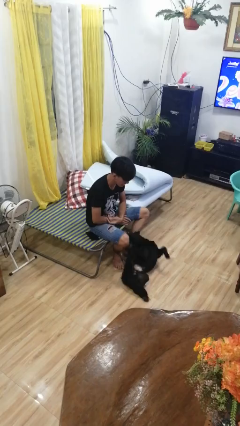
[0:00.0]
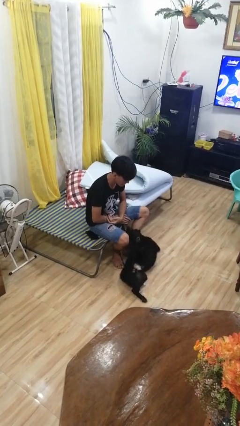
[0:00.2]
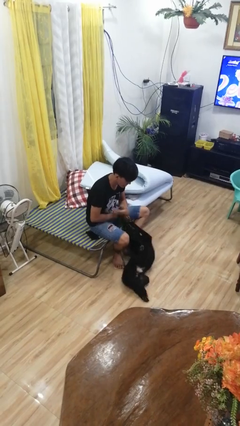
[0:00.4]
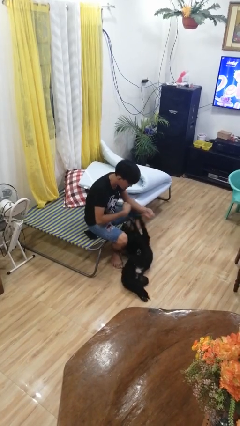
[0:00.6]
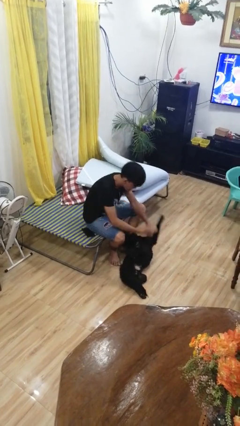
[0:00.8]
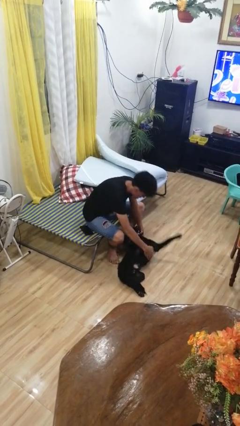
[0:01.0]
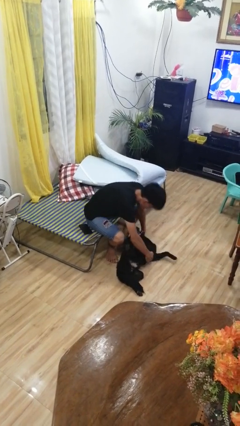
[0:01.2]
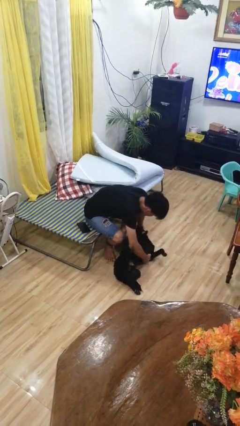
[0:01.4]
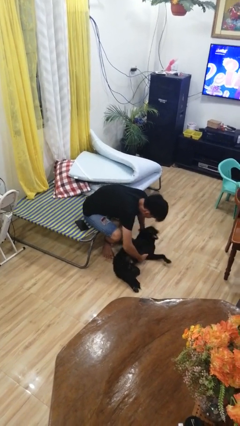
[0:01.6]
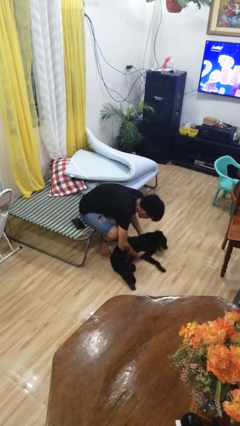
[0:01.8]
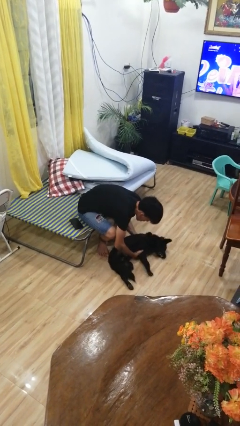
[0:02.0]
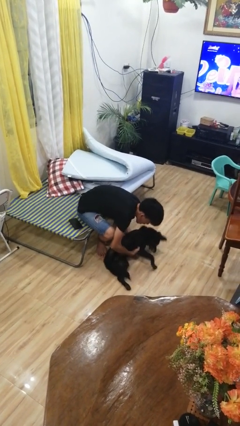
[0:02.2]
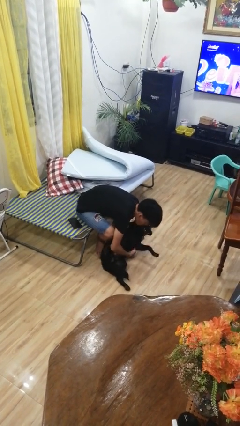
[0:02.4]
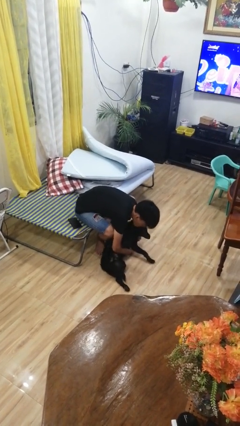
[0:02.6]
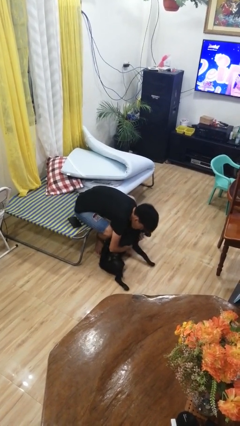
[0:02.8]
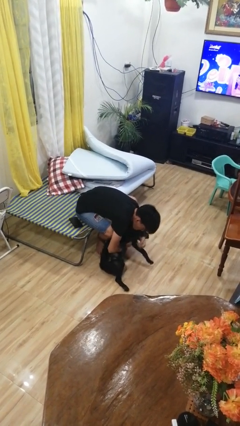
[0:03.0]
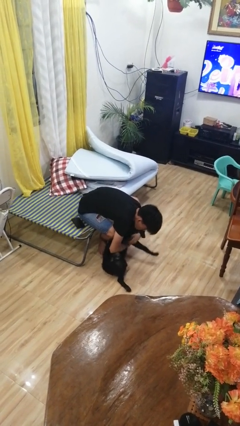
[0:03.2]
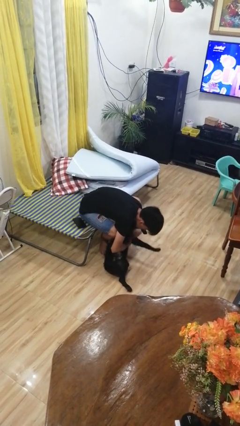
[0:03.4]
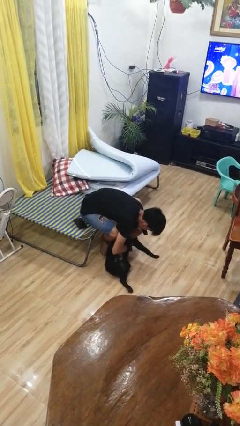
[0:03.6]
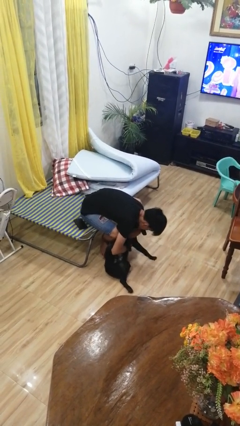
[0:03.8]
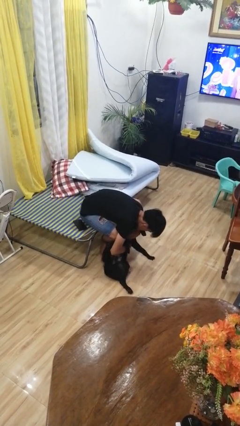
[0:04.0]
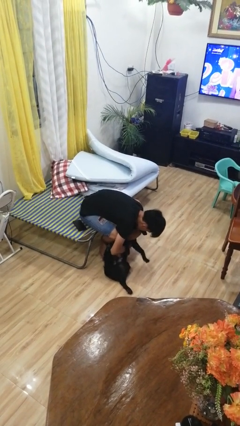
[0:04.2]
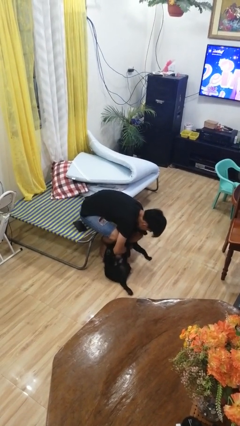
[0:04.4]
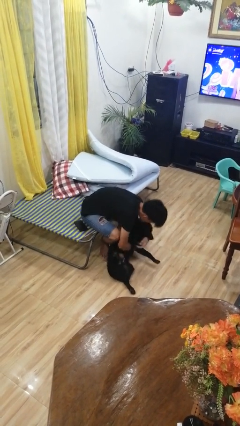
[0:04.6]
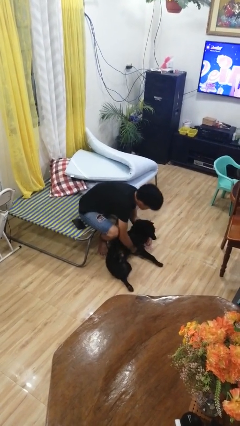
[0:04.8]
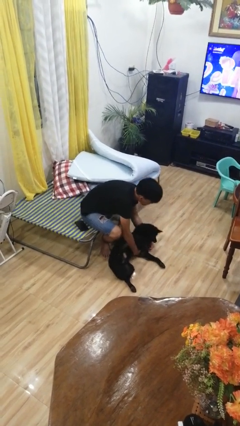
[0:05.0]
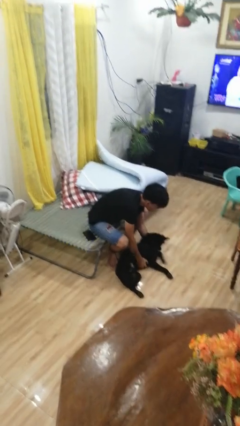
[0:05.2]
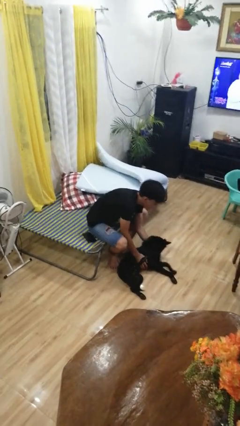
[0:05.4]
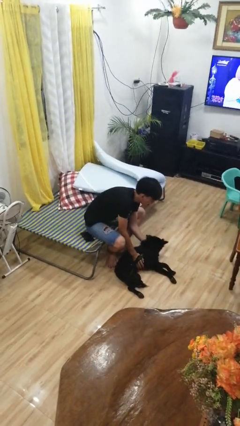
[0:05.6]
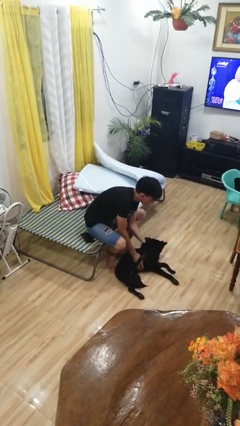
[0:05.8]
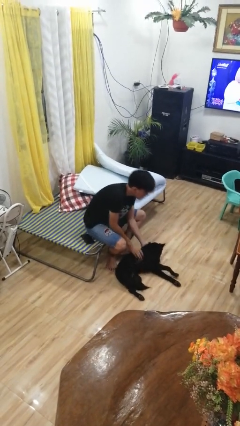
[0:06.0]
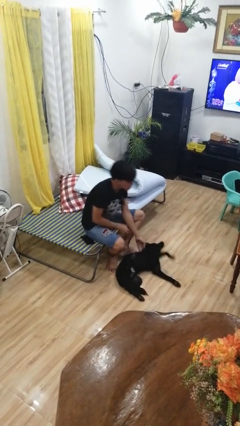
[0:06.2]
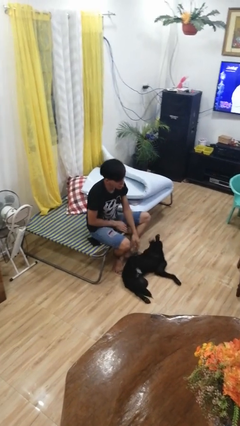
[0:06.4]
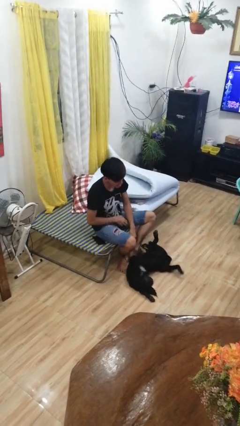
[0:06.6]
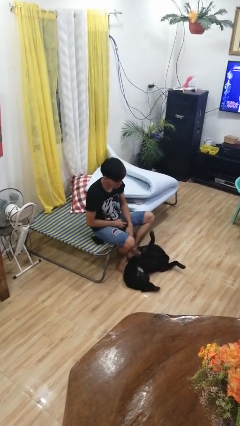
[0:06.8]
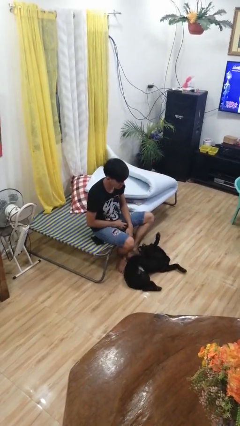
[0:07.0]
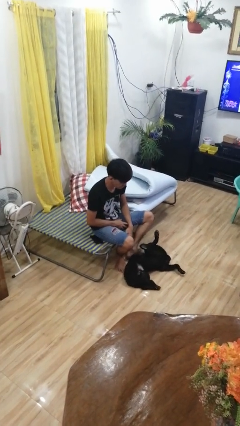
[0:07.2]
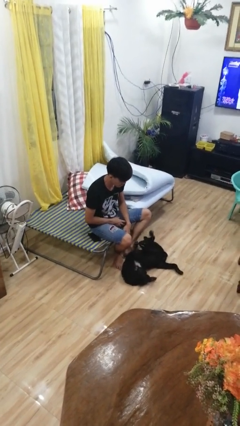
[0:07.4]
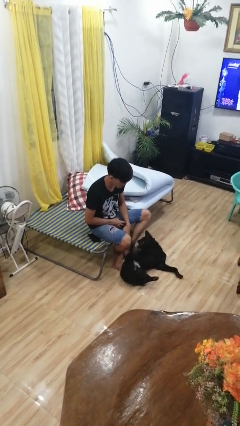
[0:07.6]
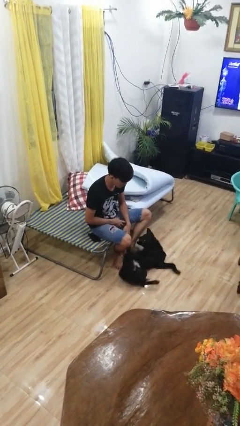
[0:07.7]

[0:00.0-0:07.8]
person hugs dog

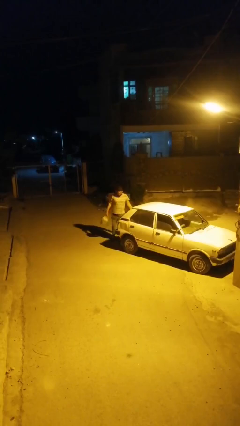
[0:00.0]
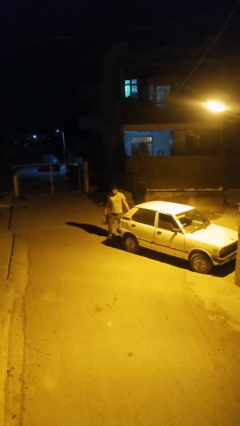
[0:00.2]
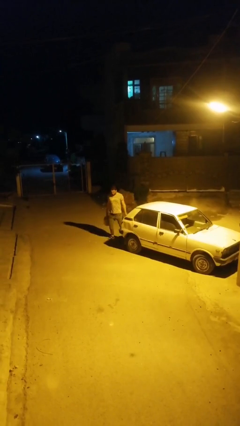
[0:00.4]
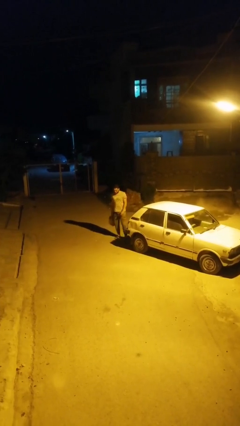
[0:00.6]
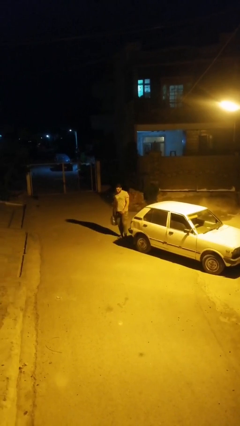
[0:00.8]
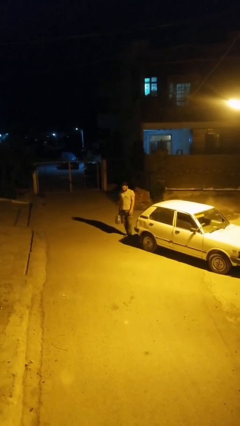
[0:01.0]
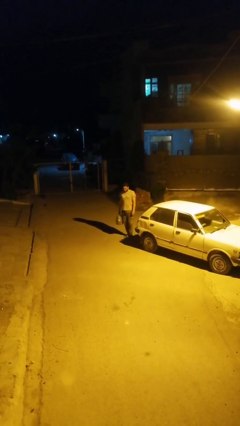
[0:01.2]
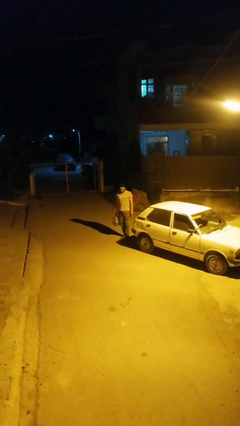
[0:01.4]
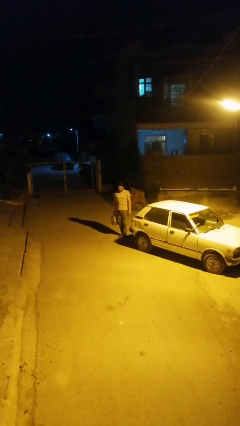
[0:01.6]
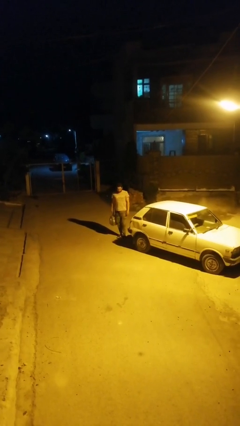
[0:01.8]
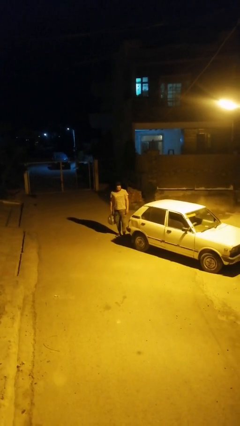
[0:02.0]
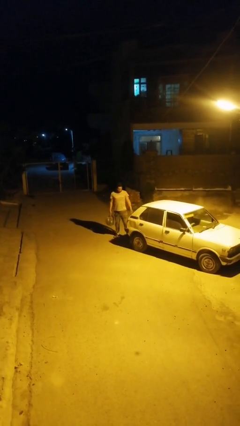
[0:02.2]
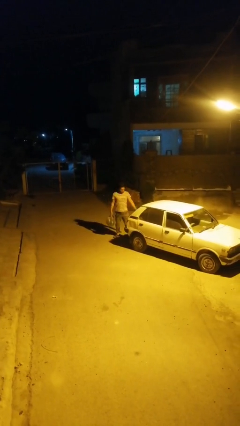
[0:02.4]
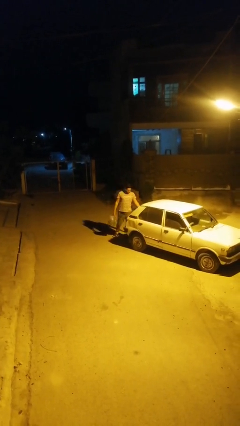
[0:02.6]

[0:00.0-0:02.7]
person unloads car

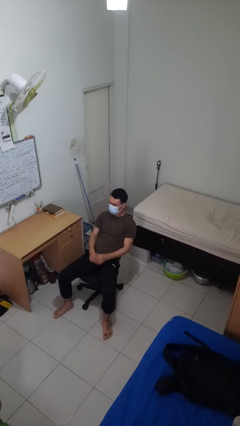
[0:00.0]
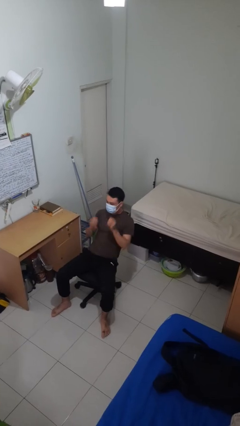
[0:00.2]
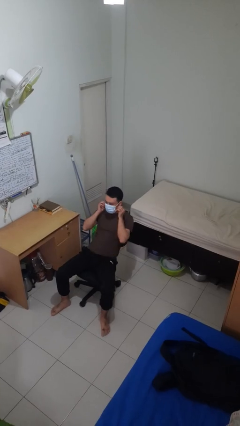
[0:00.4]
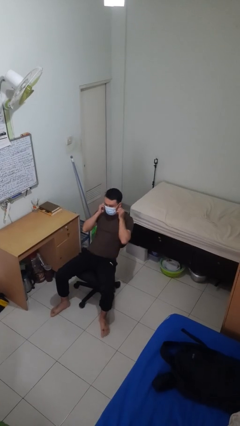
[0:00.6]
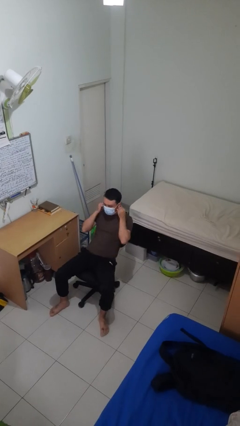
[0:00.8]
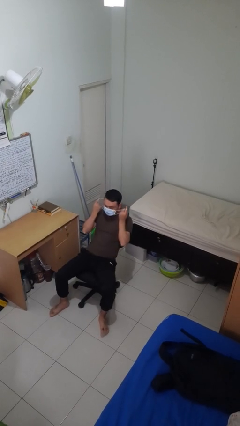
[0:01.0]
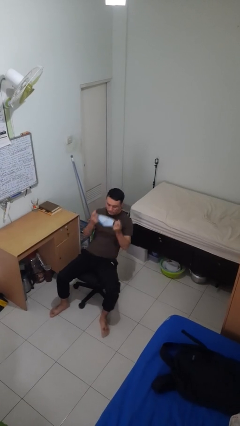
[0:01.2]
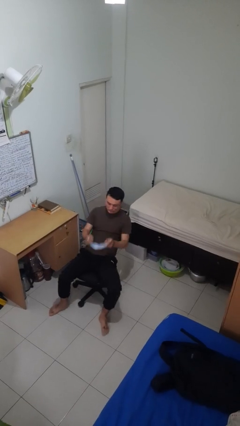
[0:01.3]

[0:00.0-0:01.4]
person takes off facemask

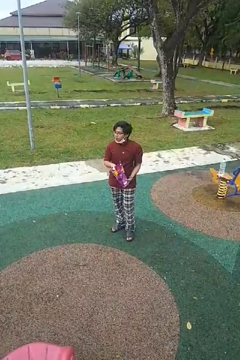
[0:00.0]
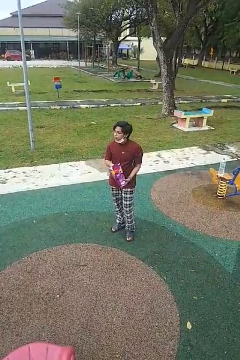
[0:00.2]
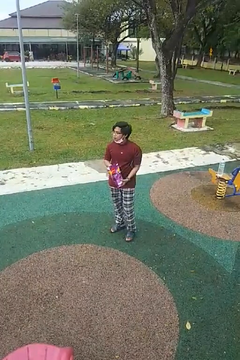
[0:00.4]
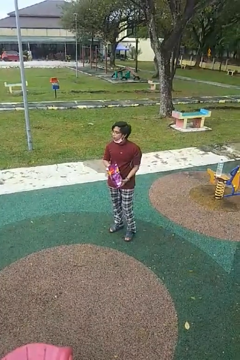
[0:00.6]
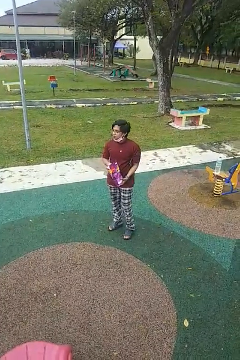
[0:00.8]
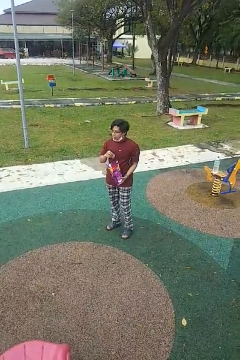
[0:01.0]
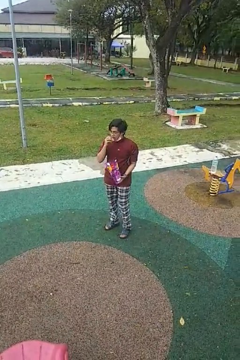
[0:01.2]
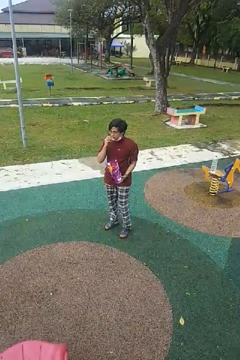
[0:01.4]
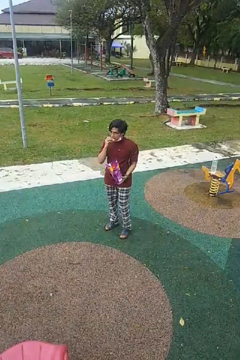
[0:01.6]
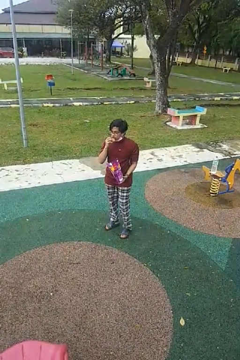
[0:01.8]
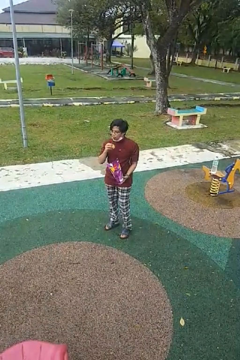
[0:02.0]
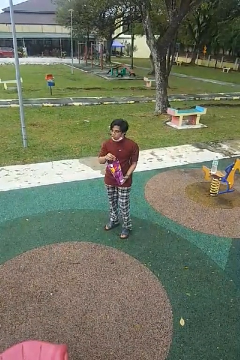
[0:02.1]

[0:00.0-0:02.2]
person eats snack from bag

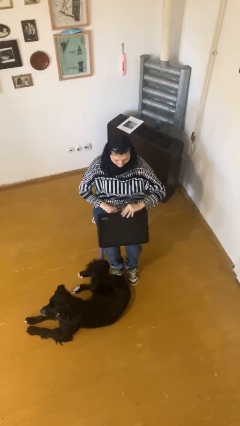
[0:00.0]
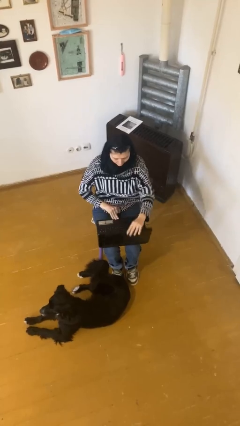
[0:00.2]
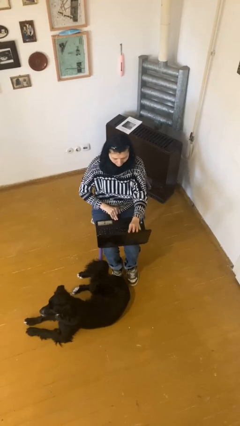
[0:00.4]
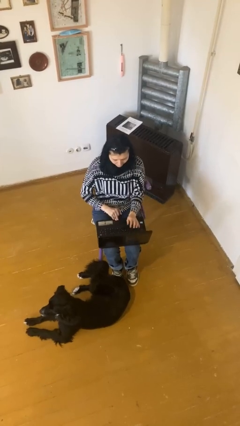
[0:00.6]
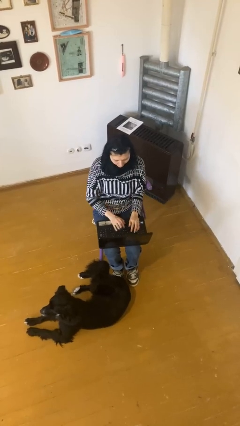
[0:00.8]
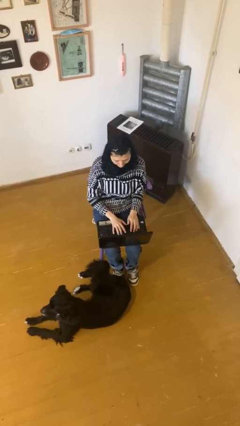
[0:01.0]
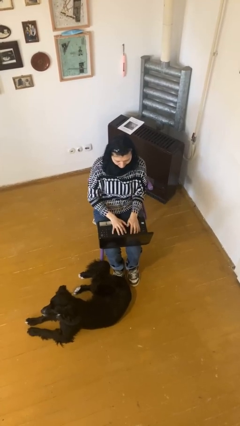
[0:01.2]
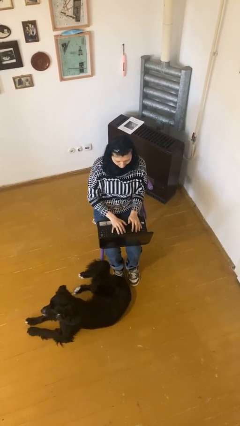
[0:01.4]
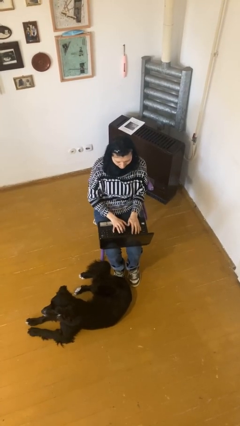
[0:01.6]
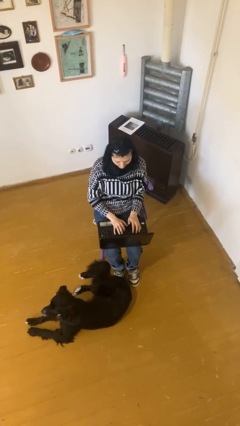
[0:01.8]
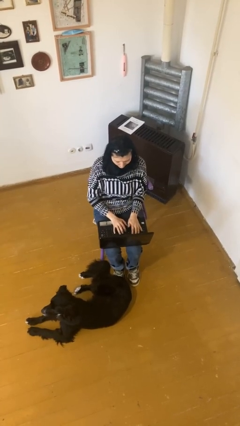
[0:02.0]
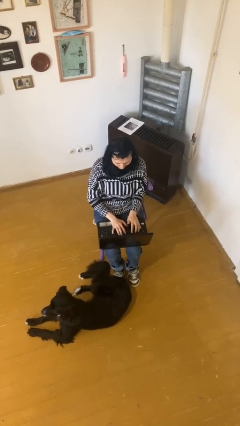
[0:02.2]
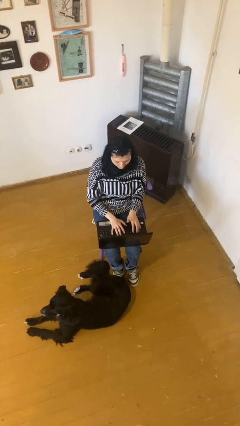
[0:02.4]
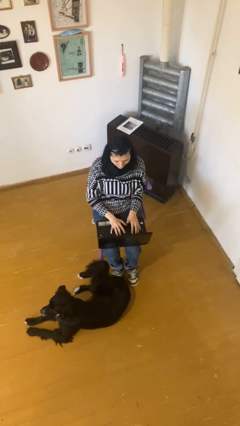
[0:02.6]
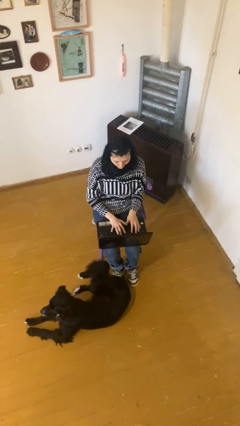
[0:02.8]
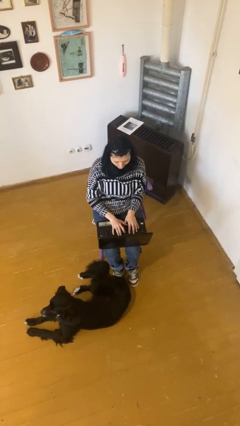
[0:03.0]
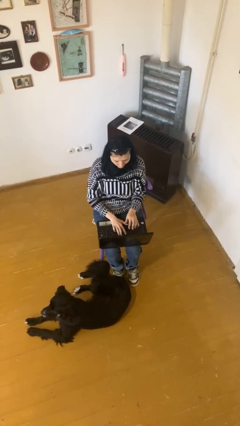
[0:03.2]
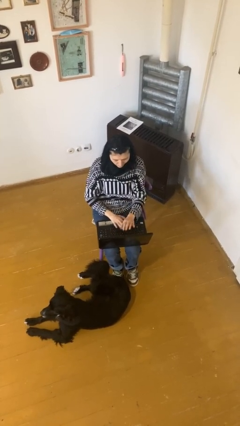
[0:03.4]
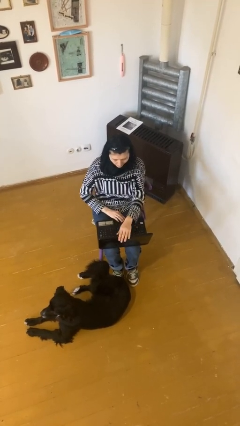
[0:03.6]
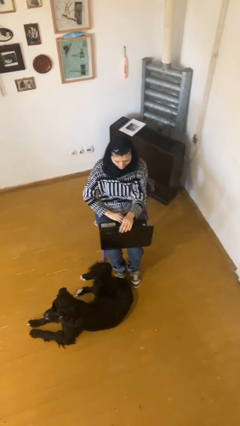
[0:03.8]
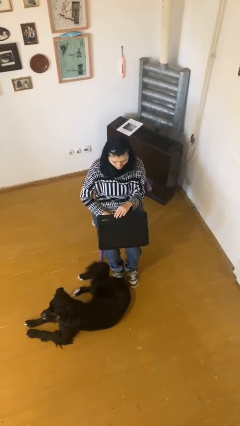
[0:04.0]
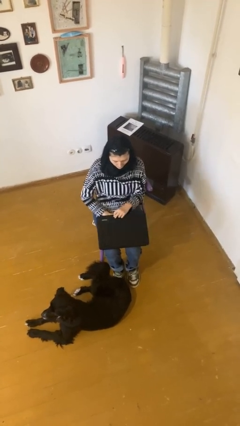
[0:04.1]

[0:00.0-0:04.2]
person interacts with laptop
